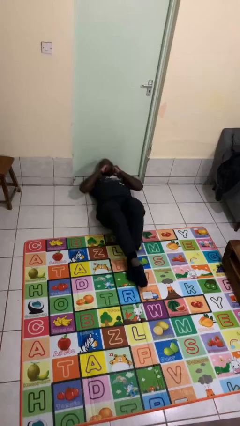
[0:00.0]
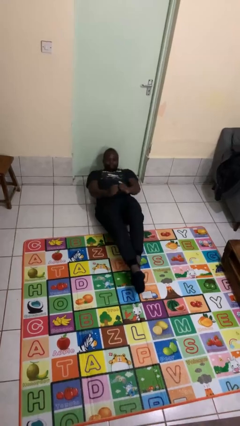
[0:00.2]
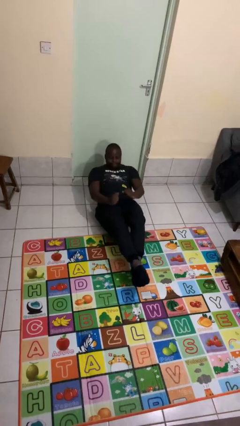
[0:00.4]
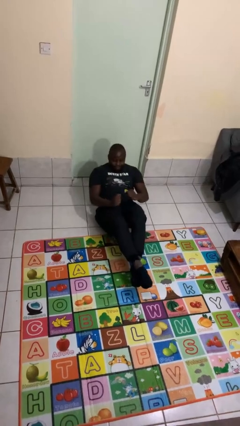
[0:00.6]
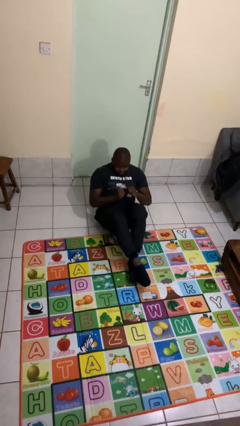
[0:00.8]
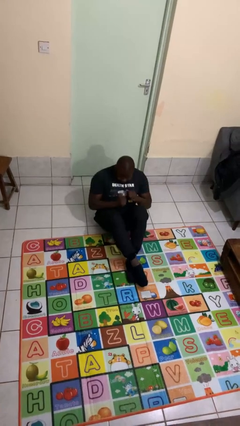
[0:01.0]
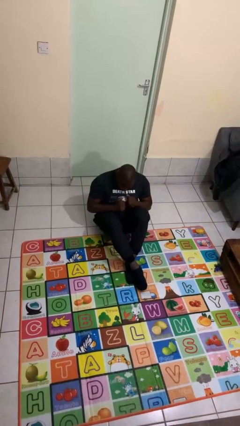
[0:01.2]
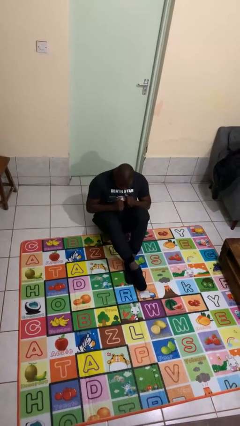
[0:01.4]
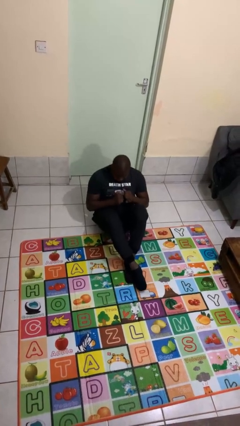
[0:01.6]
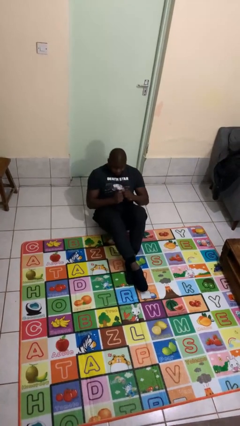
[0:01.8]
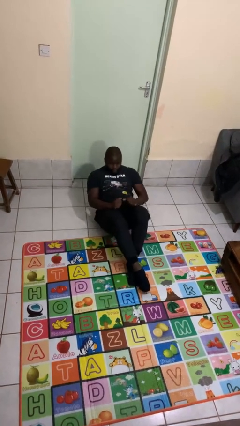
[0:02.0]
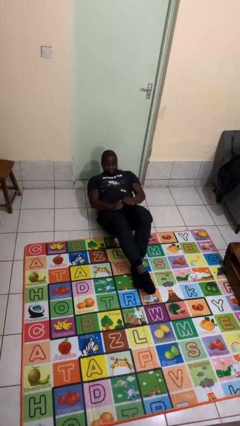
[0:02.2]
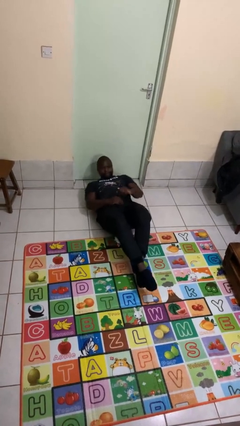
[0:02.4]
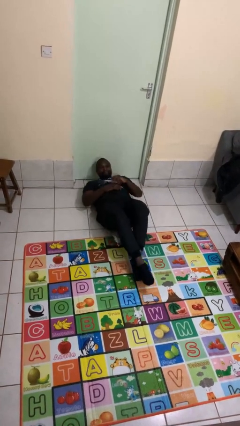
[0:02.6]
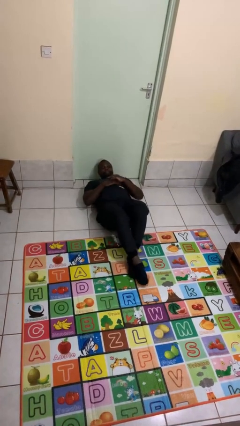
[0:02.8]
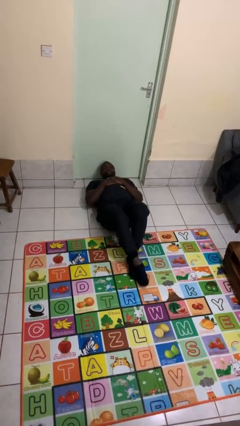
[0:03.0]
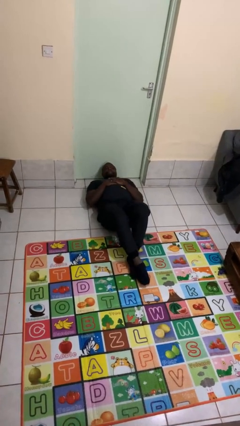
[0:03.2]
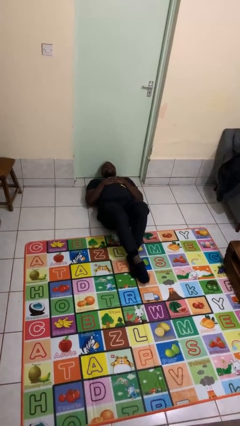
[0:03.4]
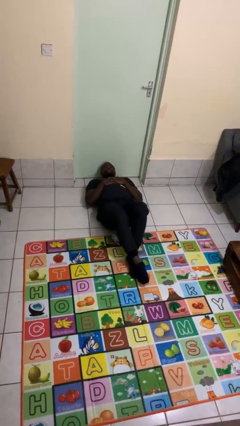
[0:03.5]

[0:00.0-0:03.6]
person exercises with situp

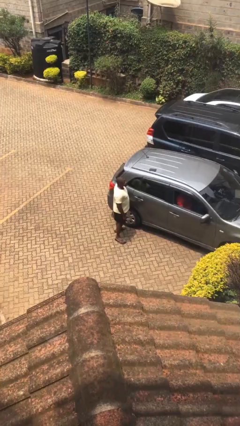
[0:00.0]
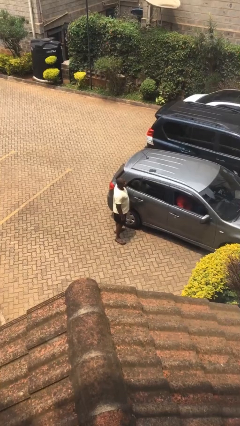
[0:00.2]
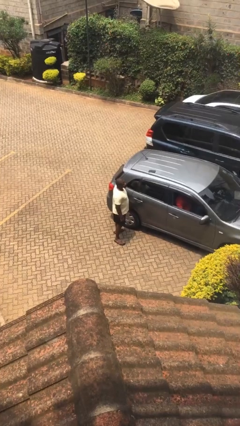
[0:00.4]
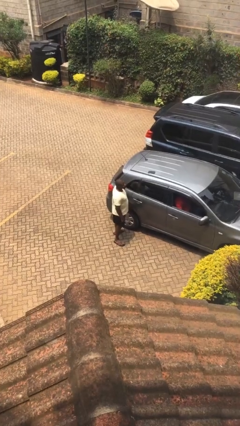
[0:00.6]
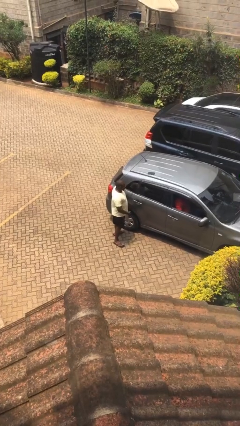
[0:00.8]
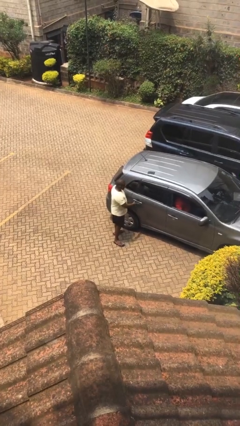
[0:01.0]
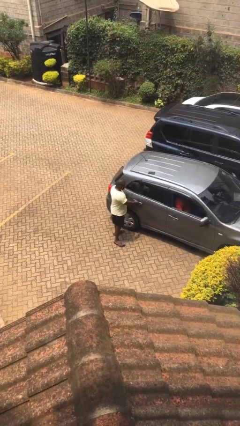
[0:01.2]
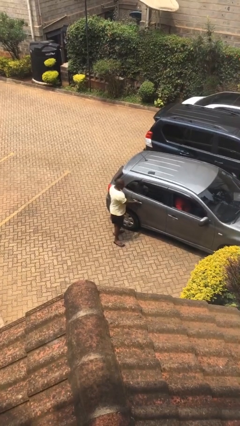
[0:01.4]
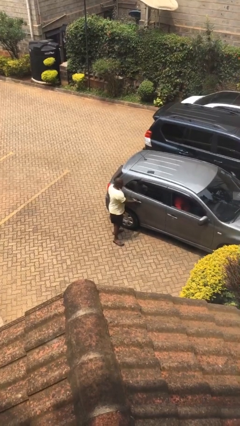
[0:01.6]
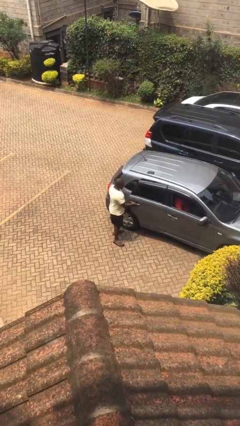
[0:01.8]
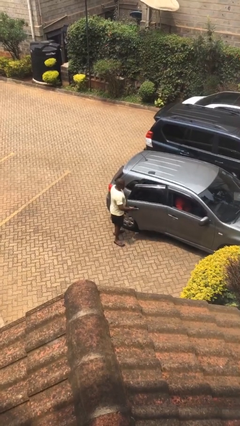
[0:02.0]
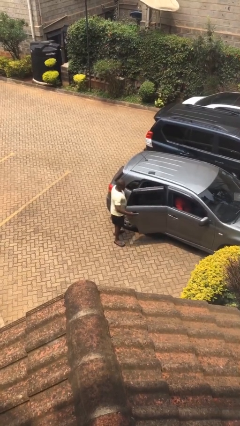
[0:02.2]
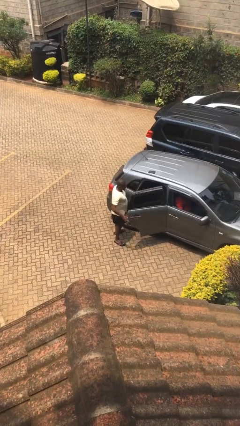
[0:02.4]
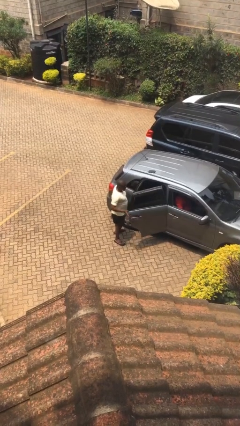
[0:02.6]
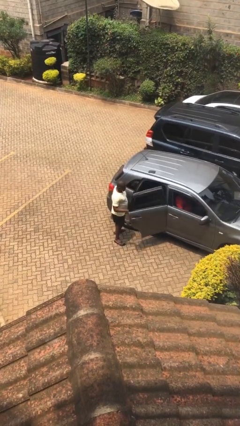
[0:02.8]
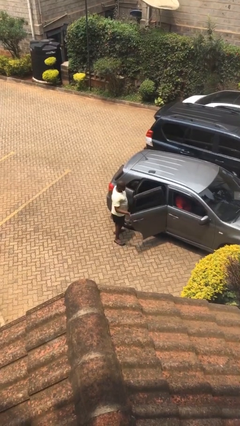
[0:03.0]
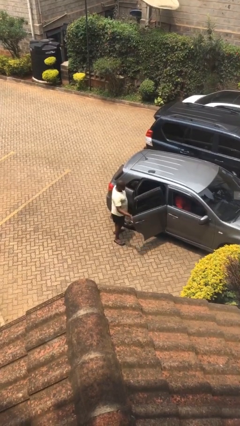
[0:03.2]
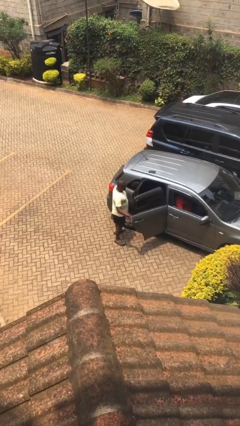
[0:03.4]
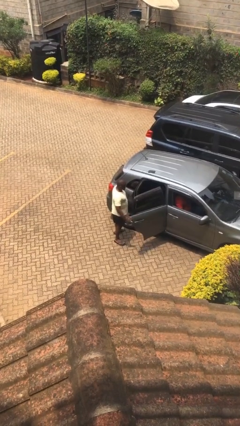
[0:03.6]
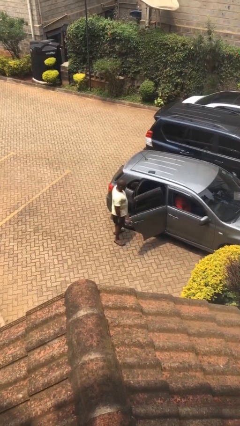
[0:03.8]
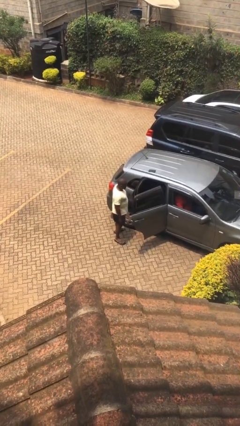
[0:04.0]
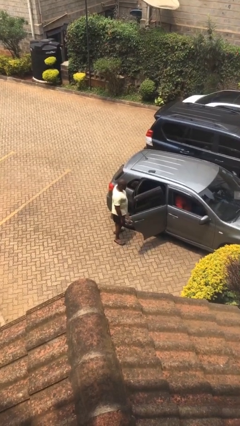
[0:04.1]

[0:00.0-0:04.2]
person opens car door

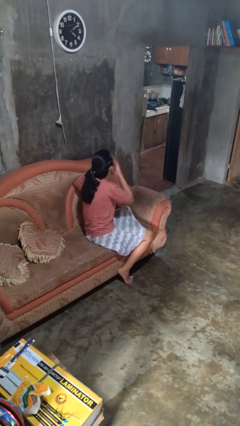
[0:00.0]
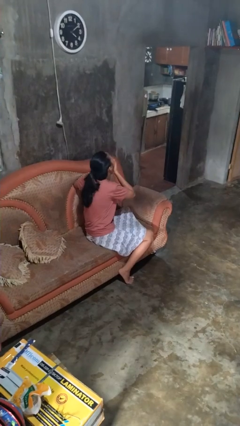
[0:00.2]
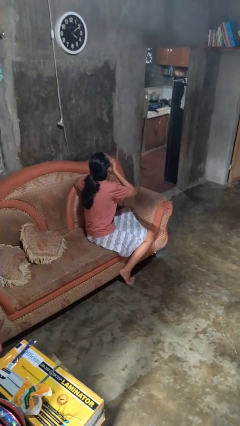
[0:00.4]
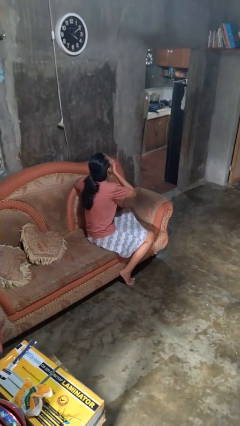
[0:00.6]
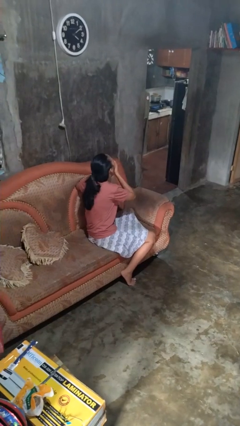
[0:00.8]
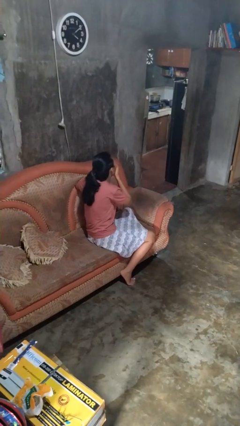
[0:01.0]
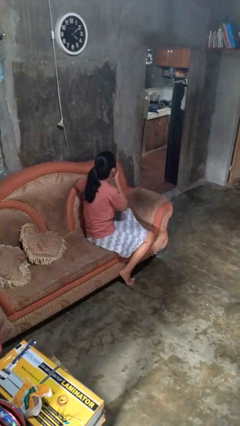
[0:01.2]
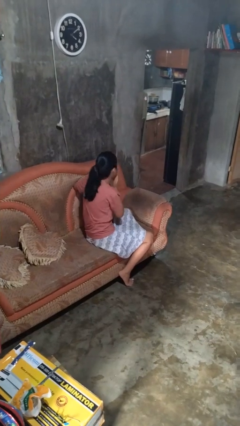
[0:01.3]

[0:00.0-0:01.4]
person yawns

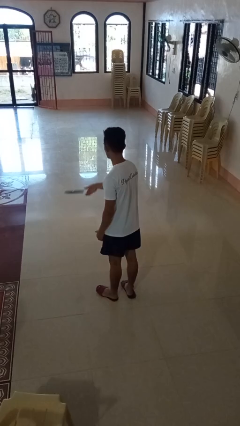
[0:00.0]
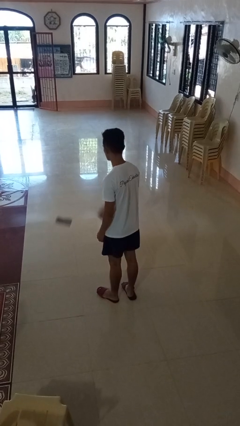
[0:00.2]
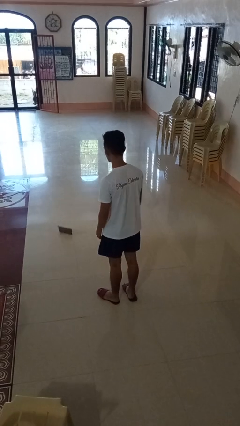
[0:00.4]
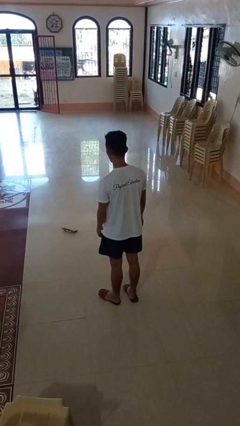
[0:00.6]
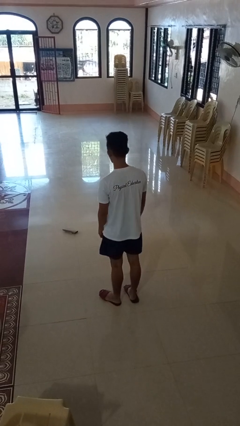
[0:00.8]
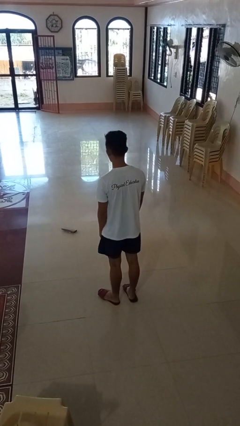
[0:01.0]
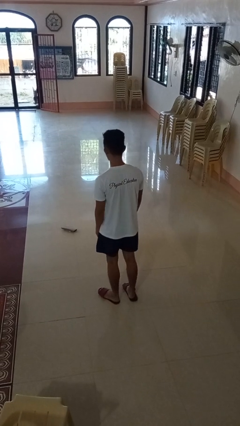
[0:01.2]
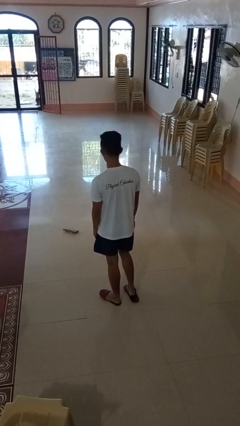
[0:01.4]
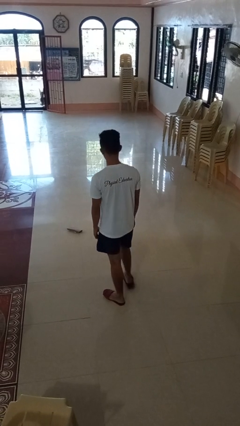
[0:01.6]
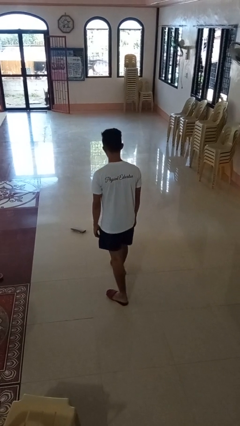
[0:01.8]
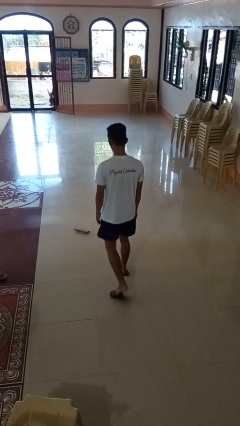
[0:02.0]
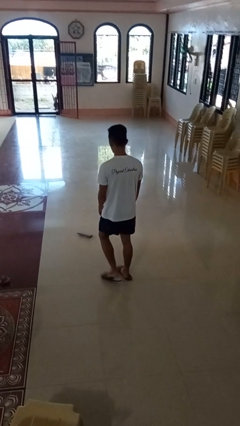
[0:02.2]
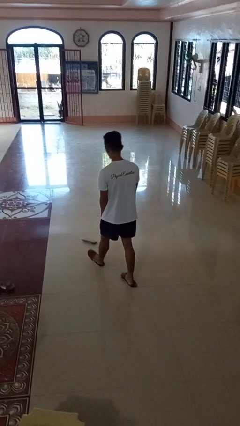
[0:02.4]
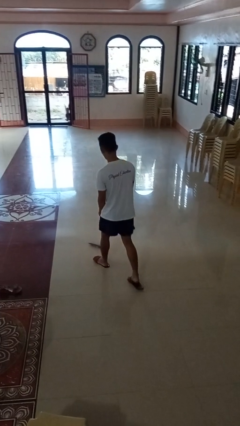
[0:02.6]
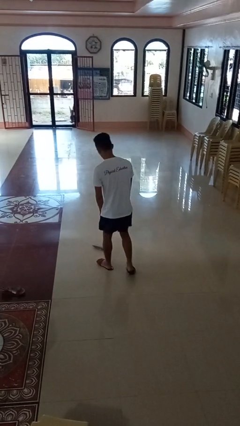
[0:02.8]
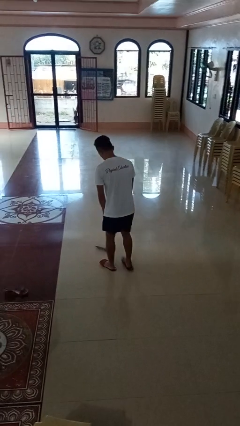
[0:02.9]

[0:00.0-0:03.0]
person throws object to ground

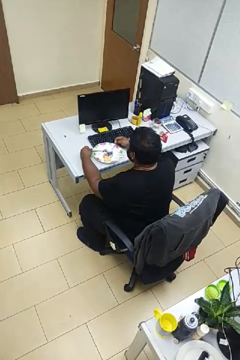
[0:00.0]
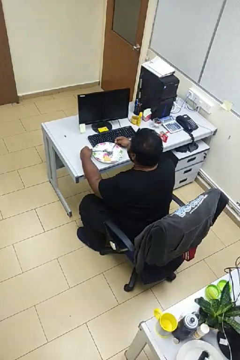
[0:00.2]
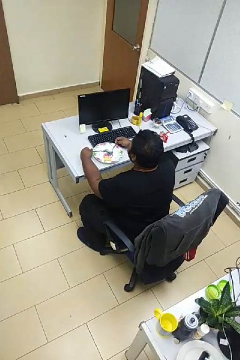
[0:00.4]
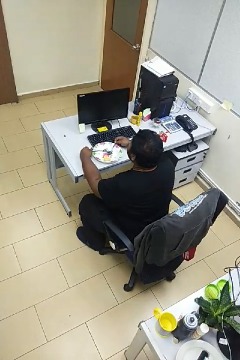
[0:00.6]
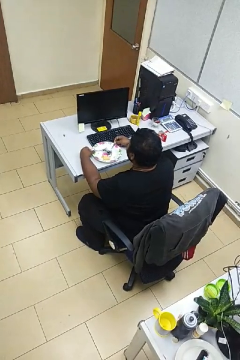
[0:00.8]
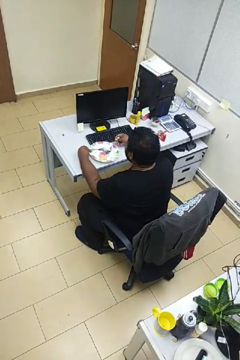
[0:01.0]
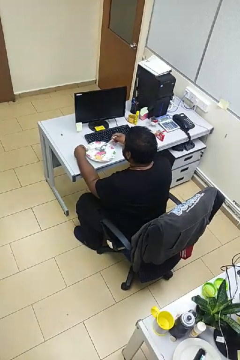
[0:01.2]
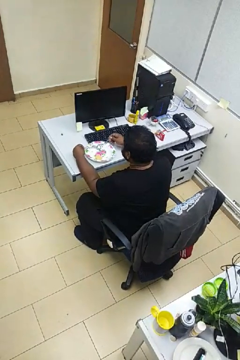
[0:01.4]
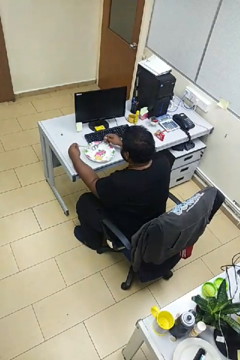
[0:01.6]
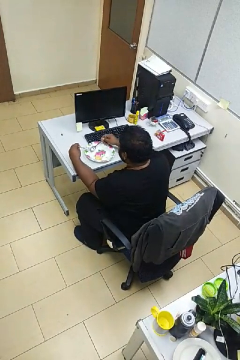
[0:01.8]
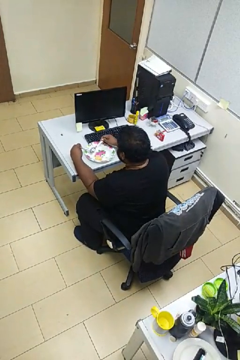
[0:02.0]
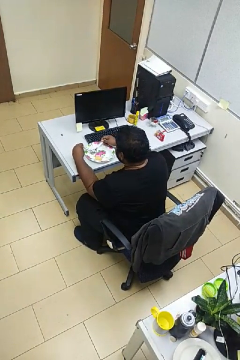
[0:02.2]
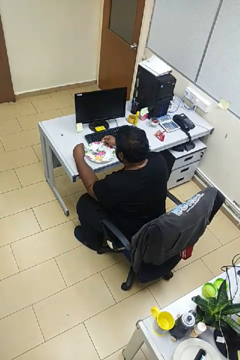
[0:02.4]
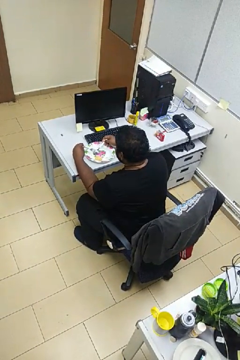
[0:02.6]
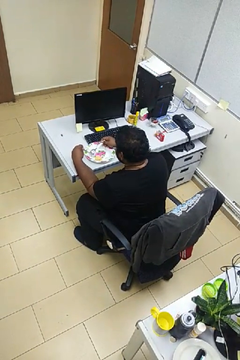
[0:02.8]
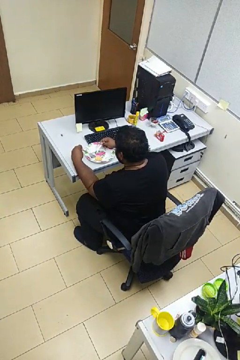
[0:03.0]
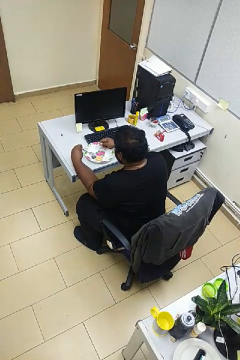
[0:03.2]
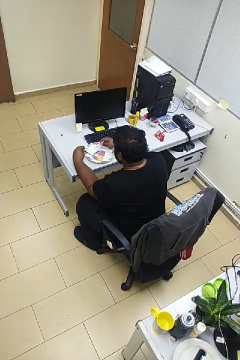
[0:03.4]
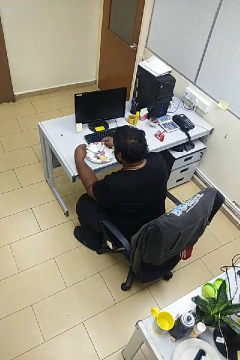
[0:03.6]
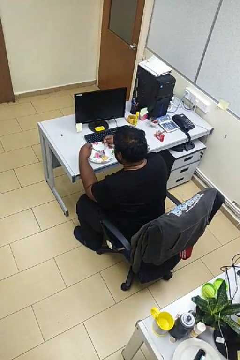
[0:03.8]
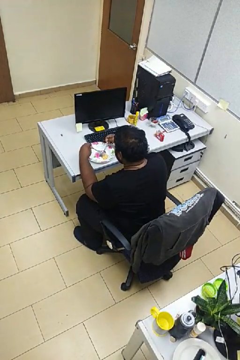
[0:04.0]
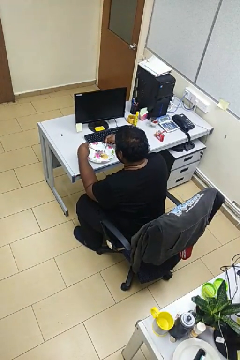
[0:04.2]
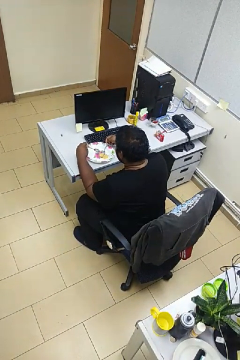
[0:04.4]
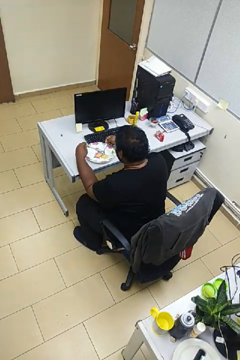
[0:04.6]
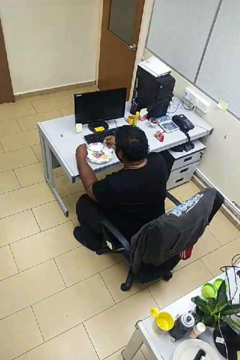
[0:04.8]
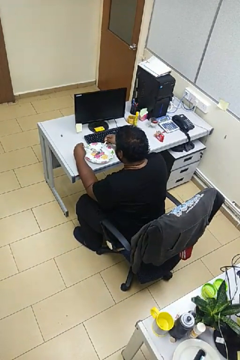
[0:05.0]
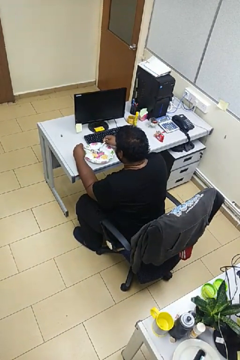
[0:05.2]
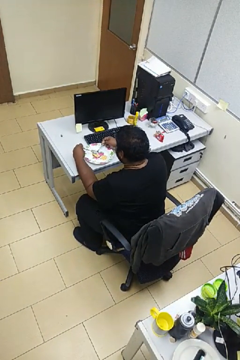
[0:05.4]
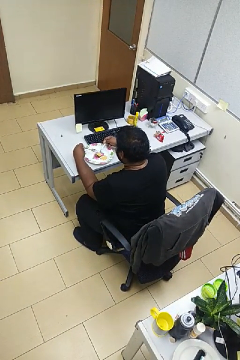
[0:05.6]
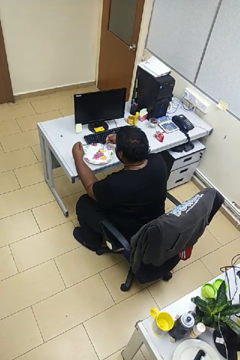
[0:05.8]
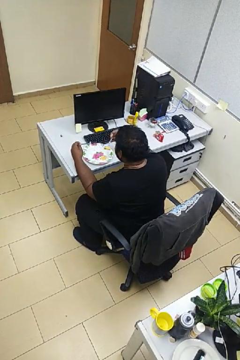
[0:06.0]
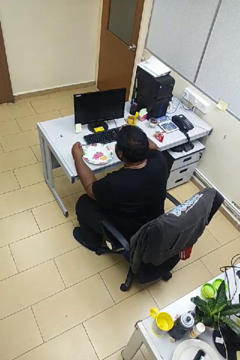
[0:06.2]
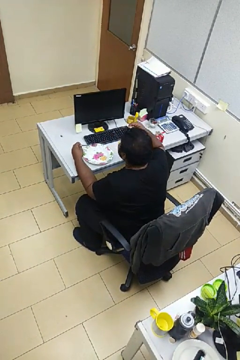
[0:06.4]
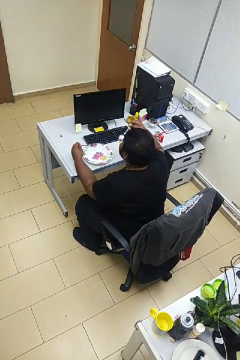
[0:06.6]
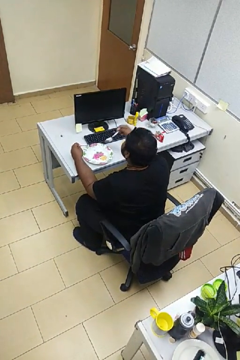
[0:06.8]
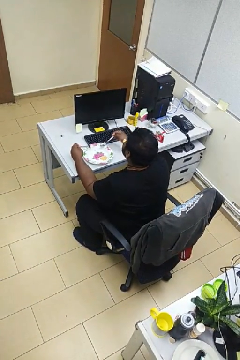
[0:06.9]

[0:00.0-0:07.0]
person eats with utensil
